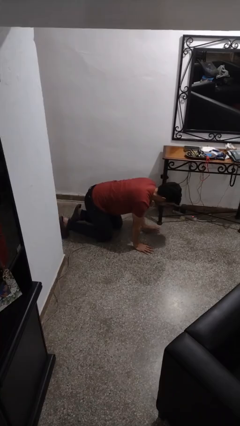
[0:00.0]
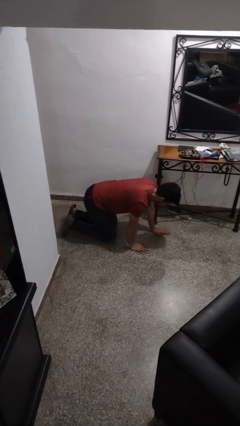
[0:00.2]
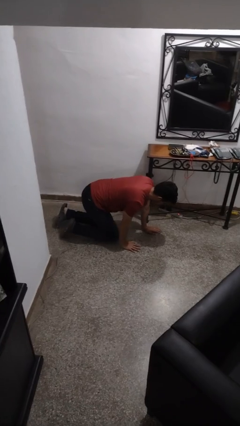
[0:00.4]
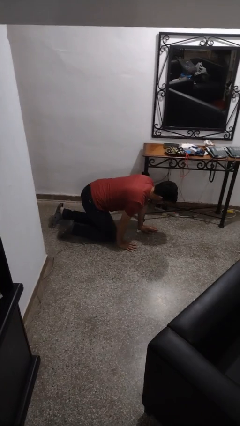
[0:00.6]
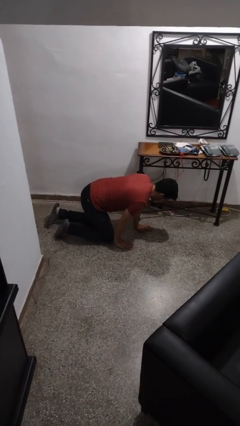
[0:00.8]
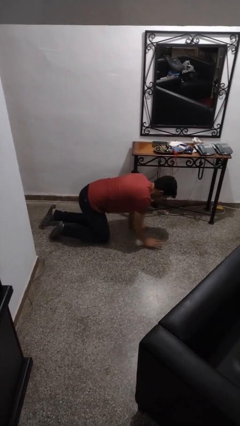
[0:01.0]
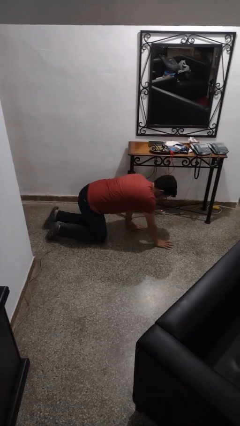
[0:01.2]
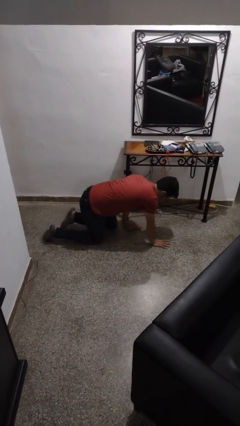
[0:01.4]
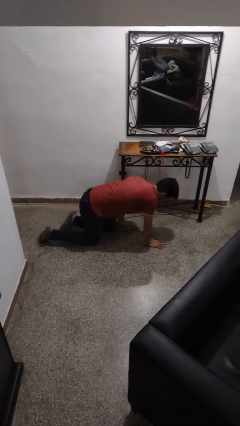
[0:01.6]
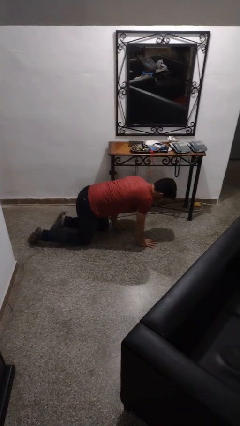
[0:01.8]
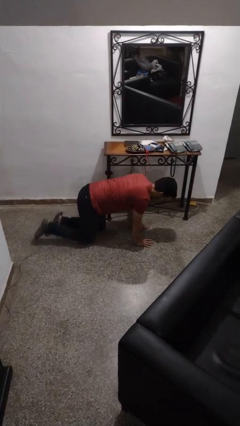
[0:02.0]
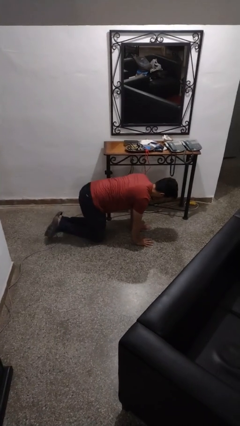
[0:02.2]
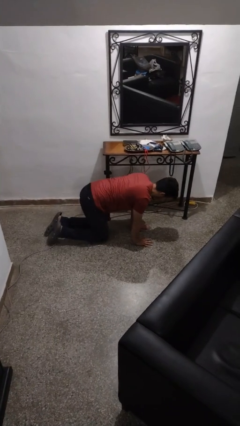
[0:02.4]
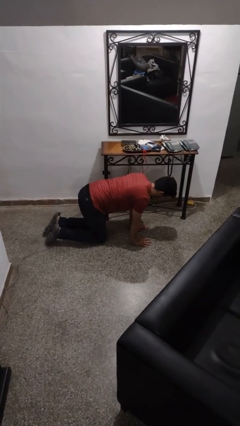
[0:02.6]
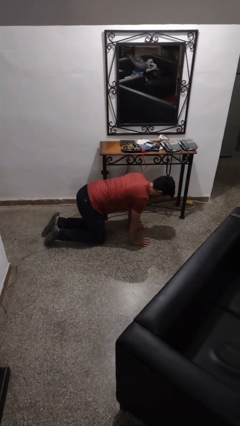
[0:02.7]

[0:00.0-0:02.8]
person crawls

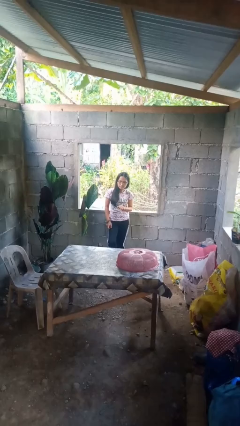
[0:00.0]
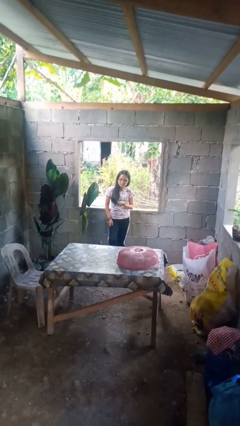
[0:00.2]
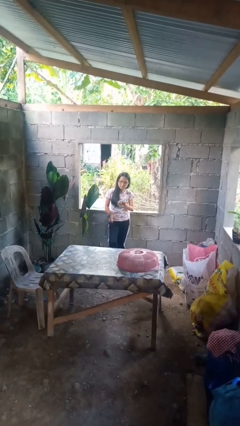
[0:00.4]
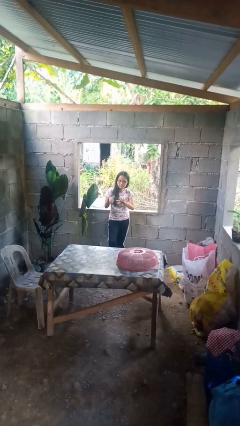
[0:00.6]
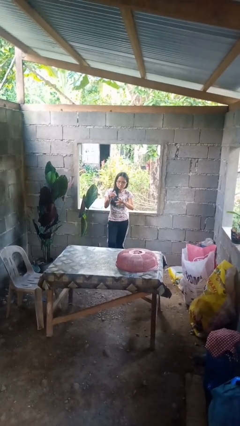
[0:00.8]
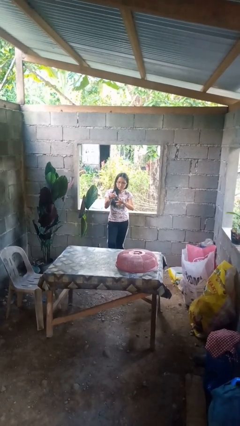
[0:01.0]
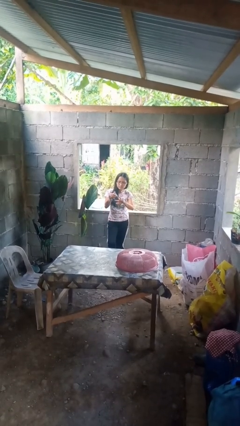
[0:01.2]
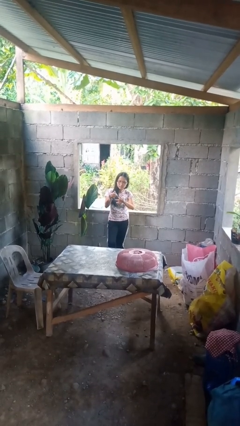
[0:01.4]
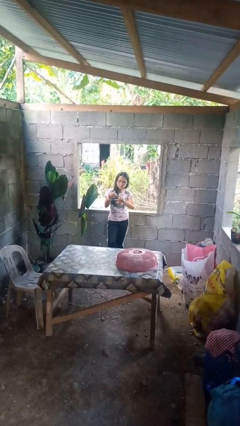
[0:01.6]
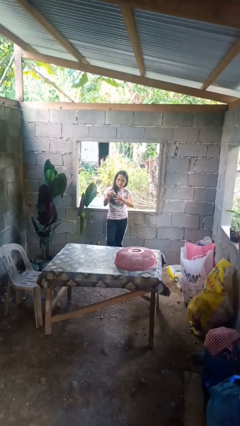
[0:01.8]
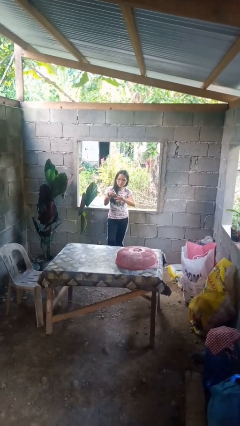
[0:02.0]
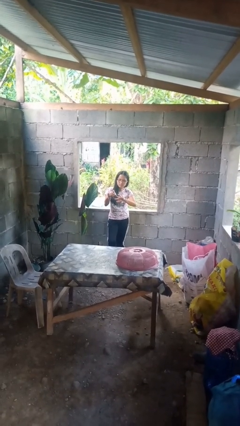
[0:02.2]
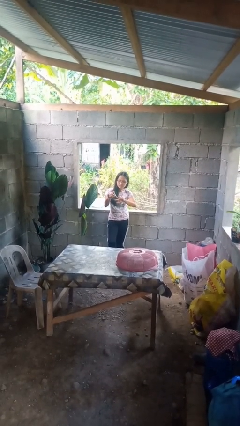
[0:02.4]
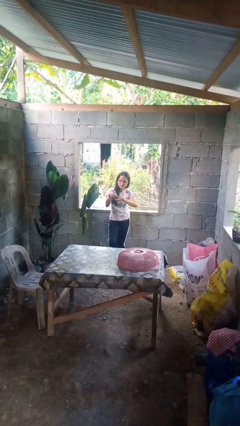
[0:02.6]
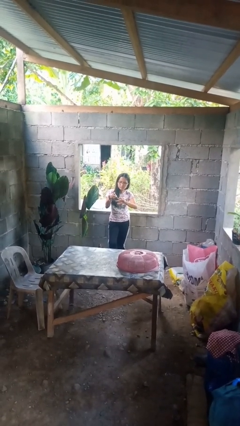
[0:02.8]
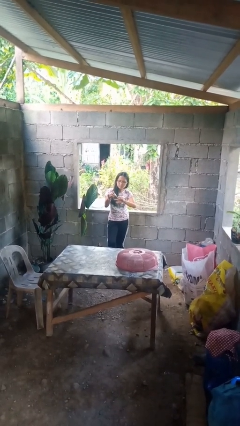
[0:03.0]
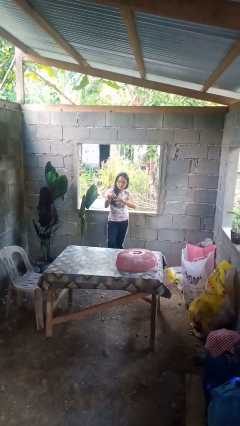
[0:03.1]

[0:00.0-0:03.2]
person clips fingernails

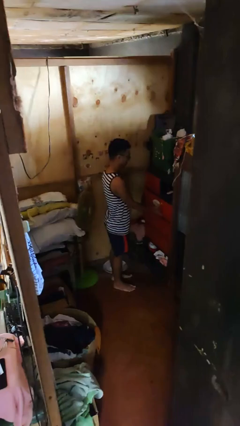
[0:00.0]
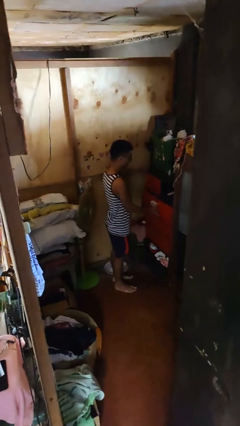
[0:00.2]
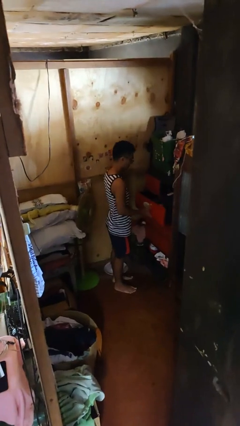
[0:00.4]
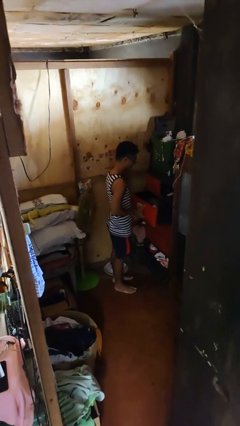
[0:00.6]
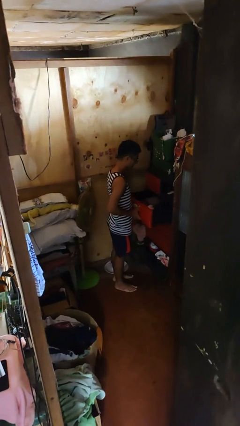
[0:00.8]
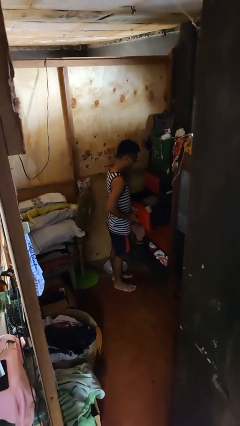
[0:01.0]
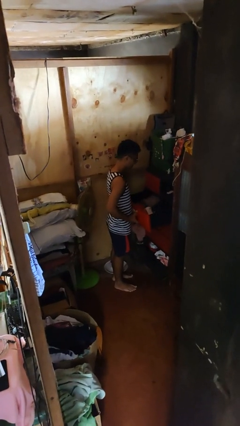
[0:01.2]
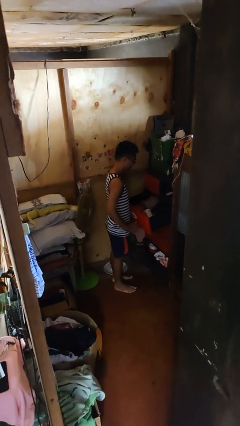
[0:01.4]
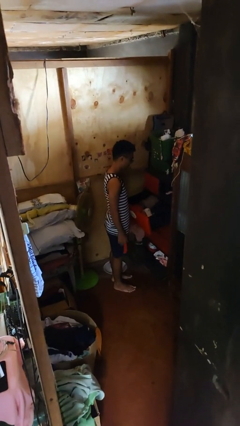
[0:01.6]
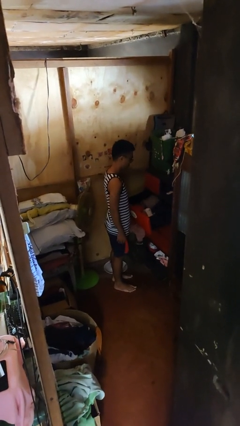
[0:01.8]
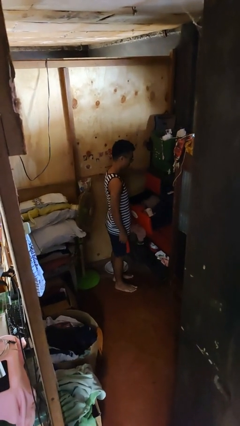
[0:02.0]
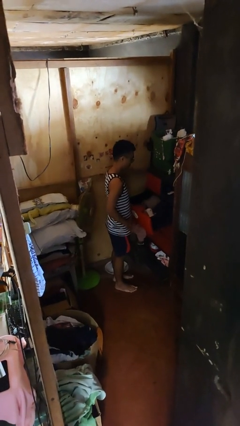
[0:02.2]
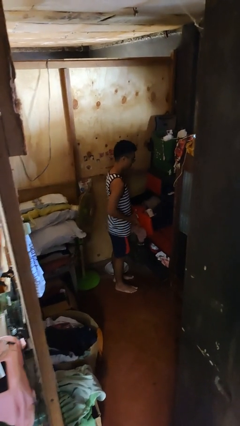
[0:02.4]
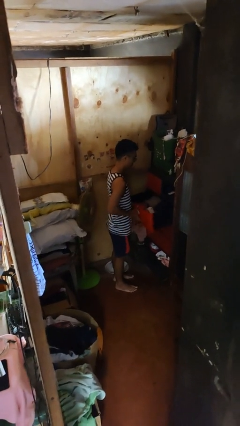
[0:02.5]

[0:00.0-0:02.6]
person opens dresser drawer

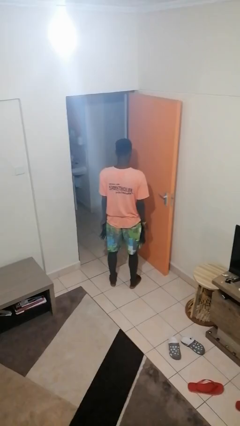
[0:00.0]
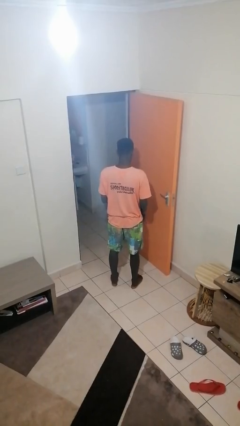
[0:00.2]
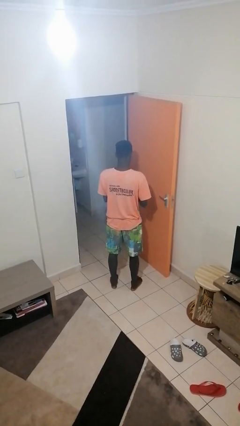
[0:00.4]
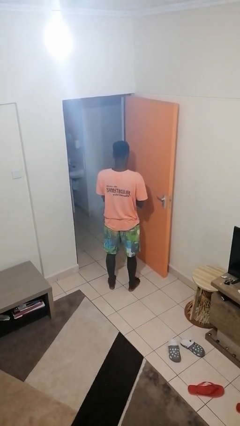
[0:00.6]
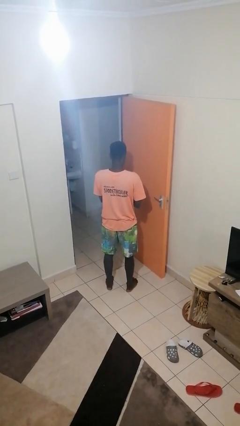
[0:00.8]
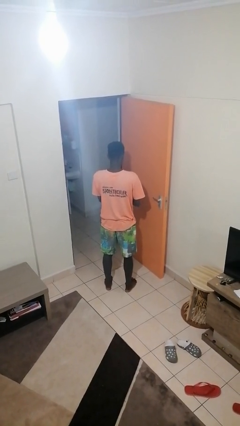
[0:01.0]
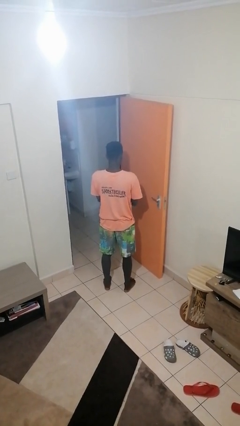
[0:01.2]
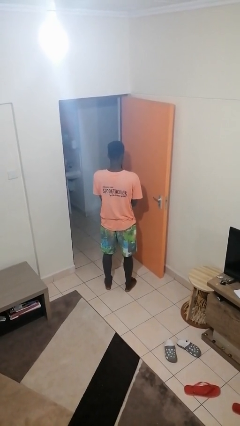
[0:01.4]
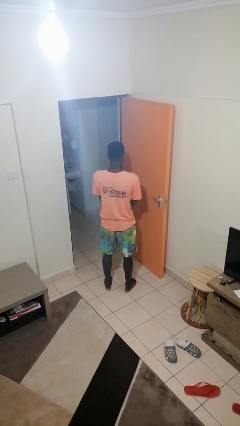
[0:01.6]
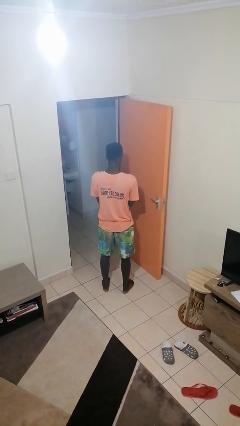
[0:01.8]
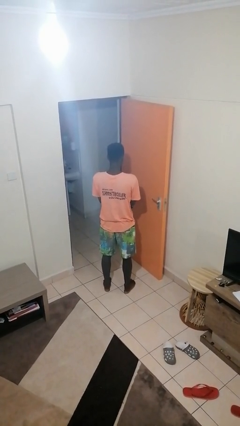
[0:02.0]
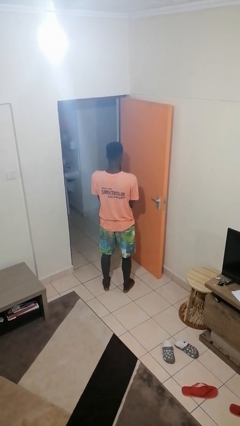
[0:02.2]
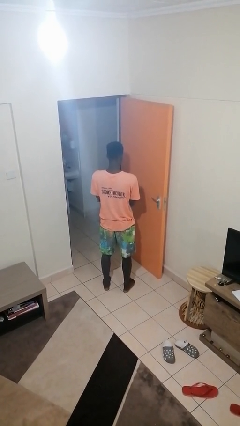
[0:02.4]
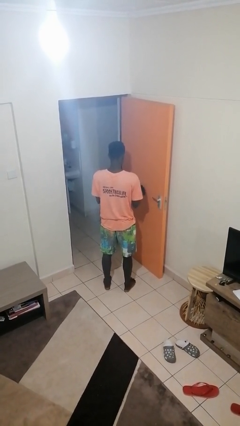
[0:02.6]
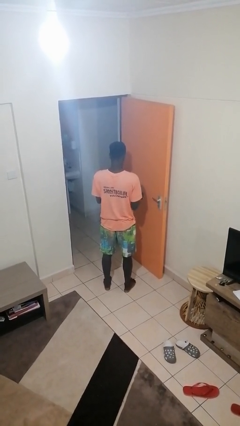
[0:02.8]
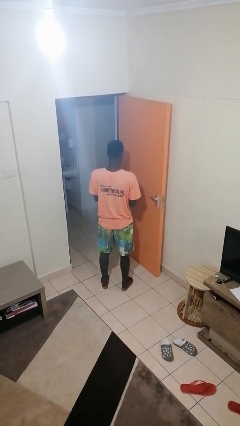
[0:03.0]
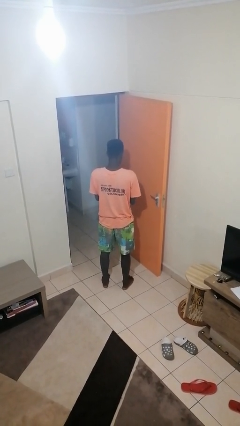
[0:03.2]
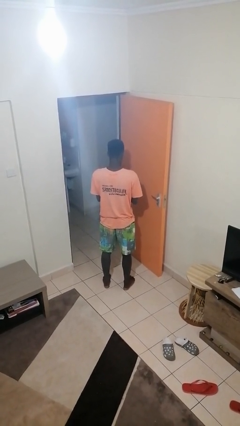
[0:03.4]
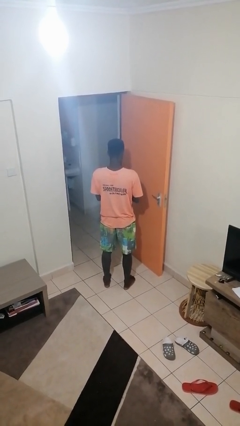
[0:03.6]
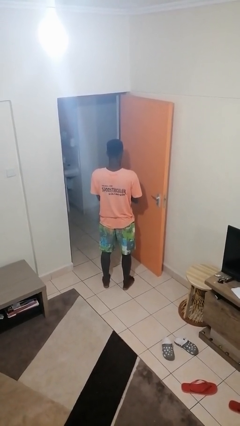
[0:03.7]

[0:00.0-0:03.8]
person puts on gloves

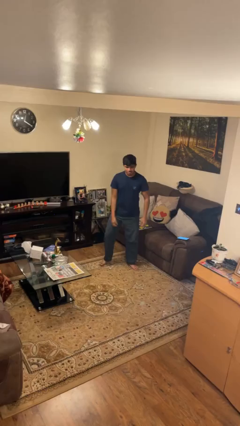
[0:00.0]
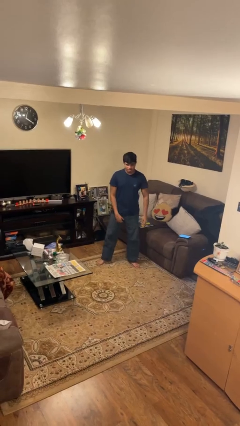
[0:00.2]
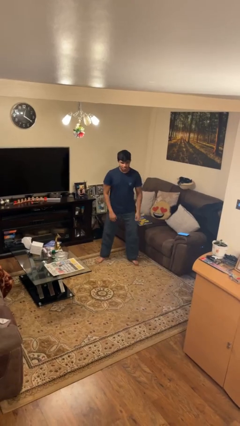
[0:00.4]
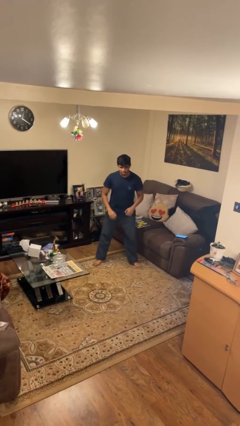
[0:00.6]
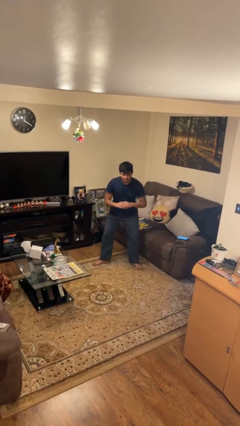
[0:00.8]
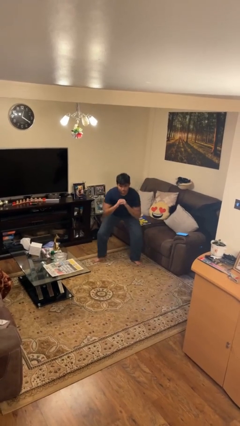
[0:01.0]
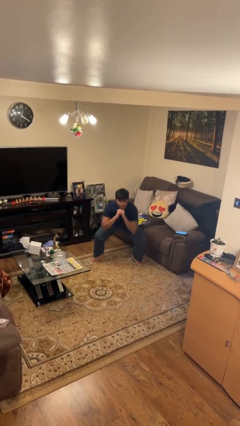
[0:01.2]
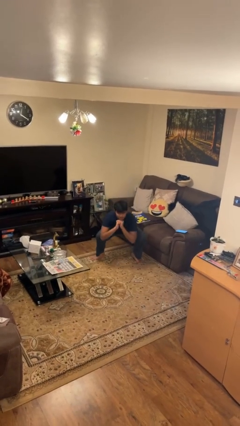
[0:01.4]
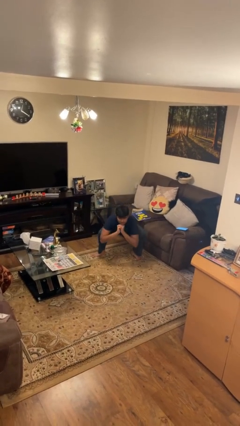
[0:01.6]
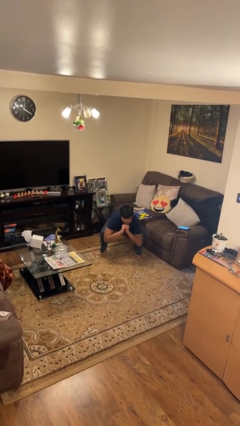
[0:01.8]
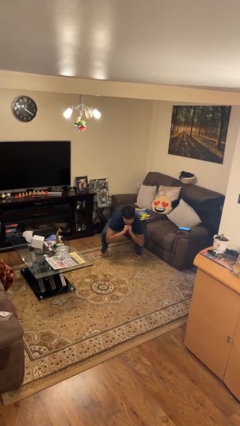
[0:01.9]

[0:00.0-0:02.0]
person squats

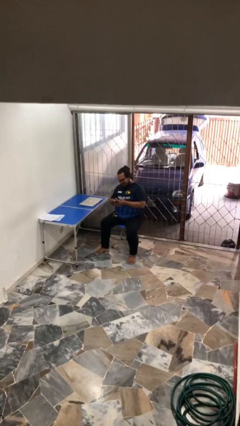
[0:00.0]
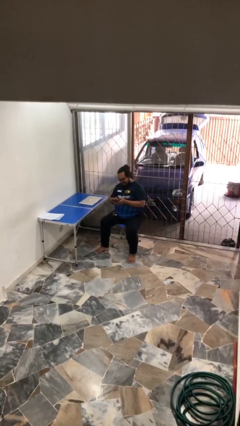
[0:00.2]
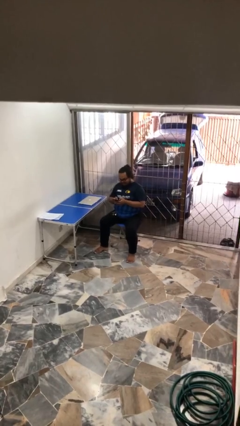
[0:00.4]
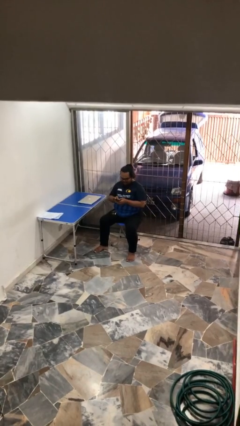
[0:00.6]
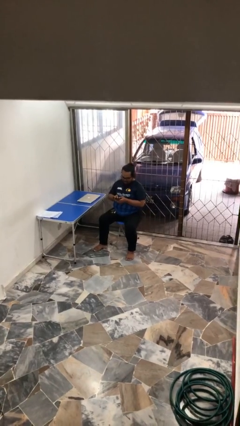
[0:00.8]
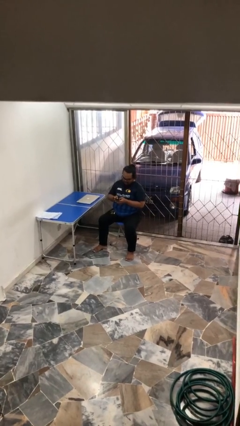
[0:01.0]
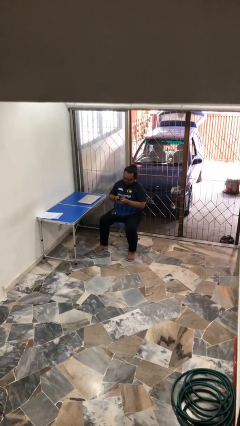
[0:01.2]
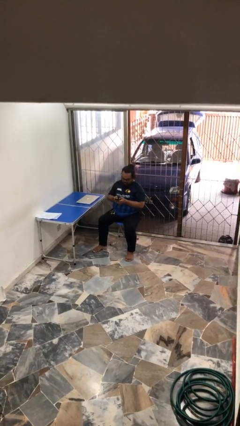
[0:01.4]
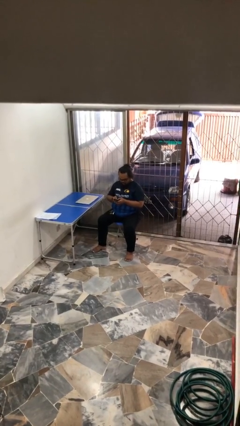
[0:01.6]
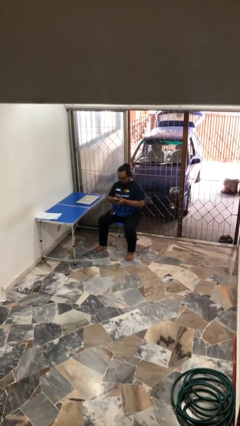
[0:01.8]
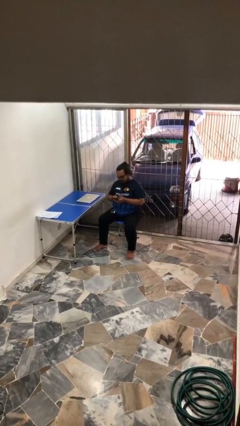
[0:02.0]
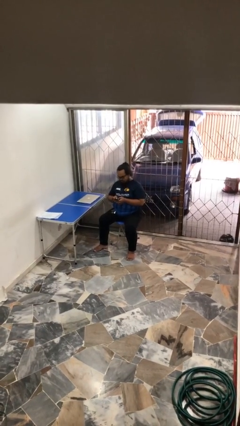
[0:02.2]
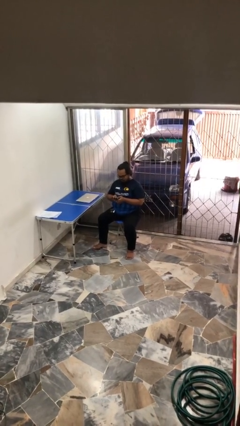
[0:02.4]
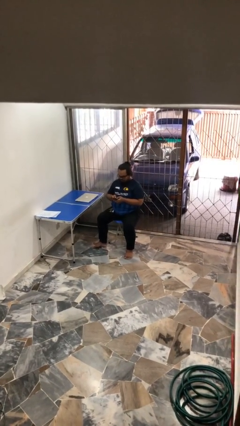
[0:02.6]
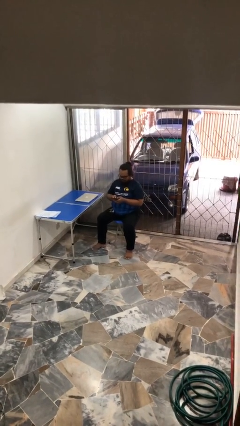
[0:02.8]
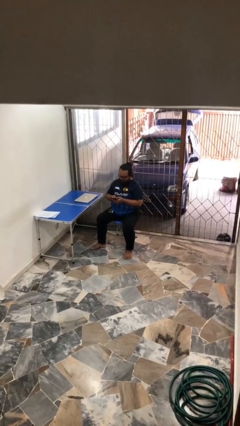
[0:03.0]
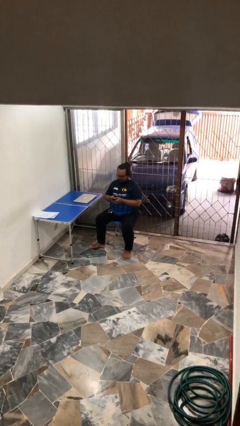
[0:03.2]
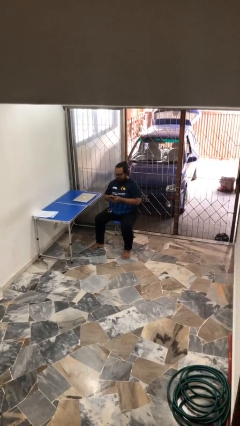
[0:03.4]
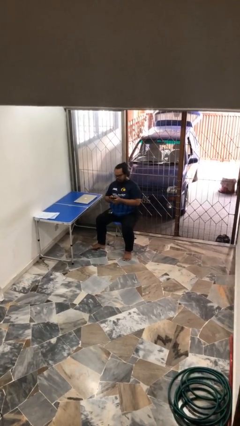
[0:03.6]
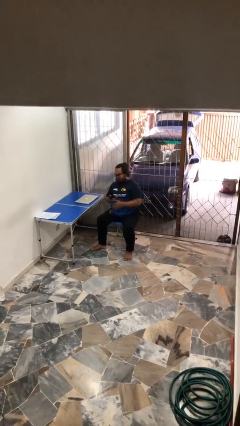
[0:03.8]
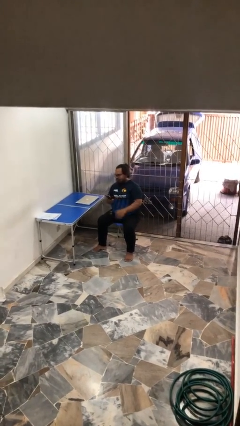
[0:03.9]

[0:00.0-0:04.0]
person texts on phone
